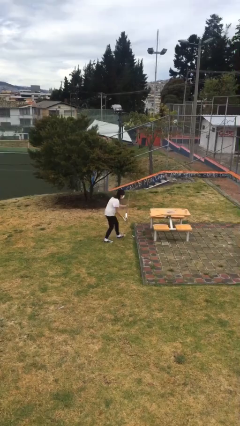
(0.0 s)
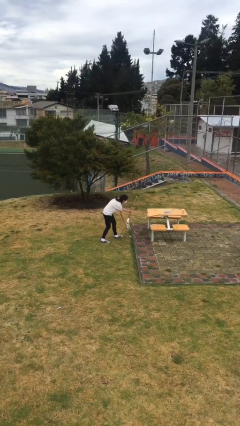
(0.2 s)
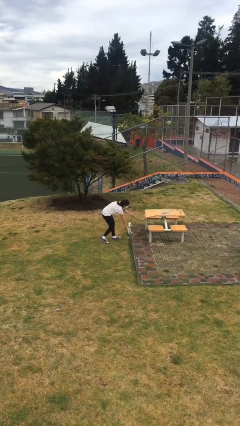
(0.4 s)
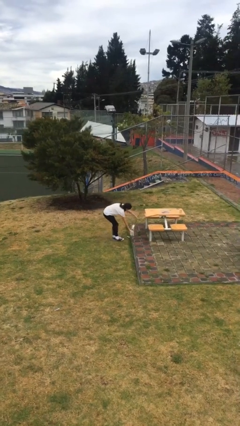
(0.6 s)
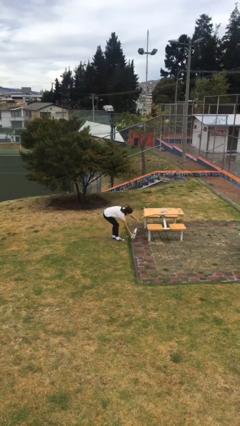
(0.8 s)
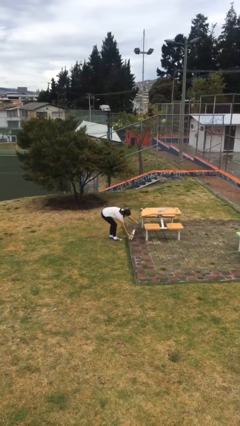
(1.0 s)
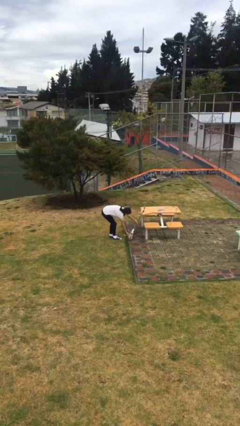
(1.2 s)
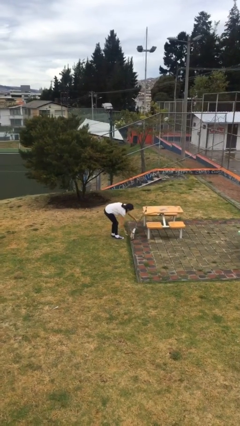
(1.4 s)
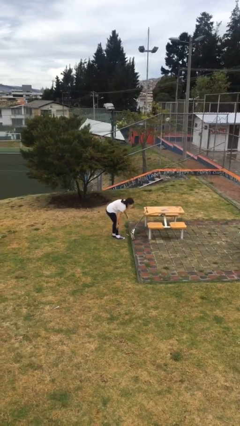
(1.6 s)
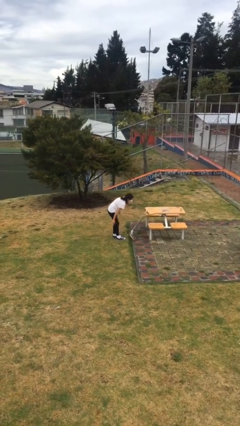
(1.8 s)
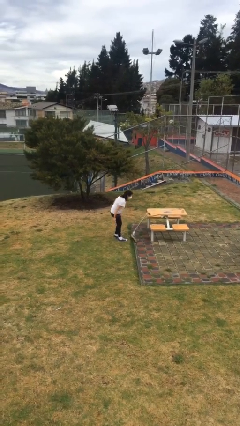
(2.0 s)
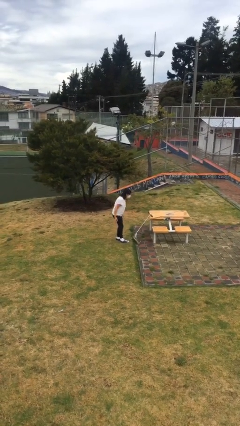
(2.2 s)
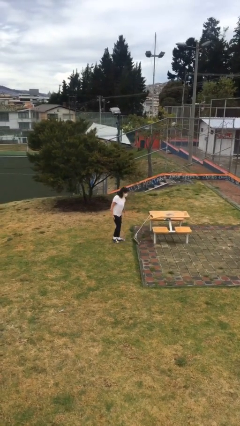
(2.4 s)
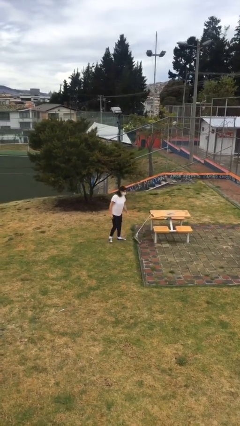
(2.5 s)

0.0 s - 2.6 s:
person puts down object on floor

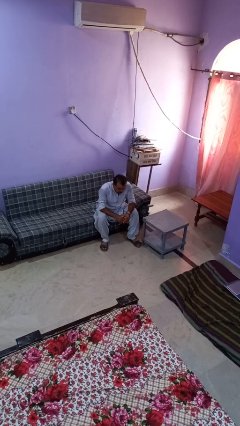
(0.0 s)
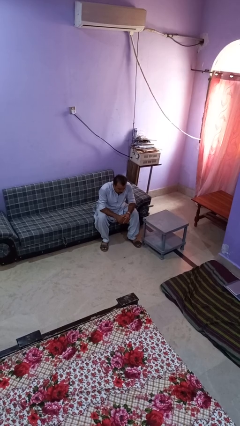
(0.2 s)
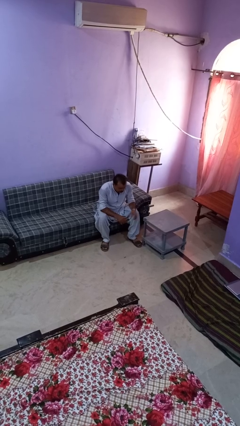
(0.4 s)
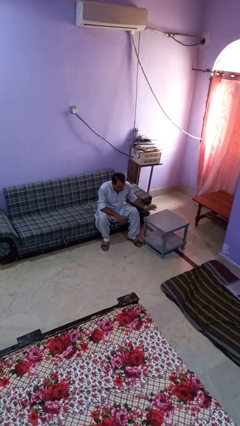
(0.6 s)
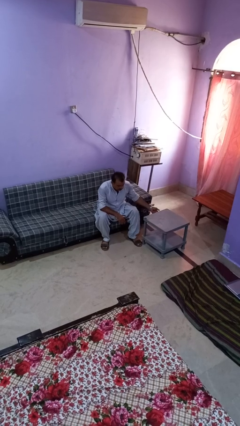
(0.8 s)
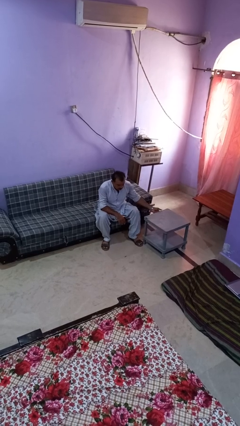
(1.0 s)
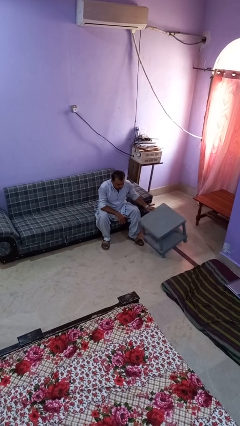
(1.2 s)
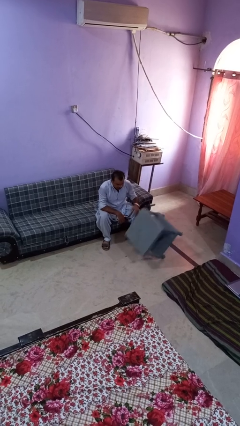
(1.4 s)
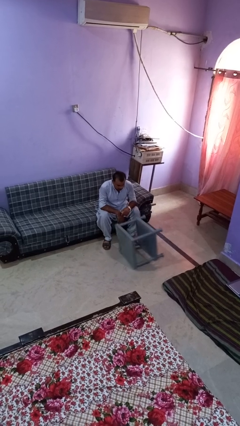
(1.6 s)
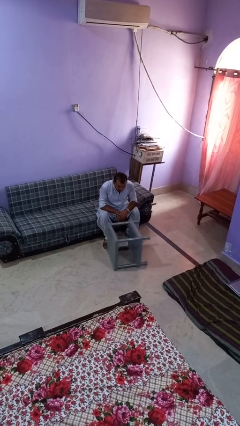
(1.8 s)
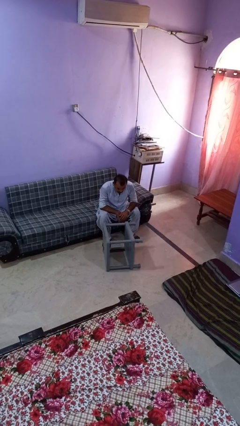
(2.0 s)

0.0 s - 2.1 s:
person knocks over furniture

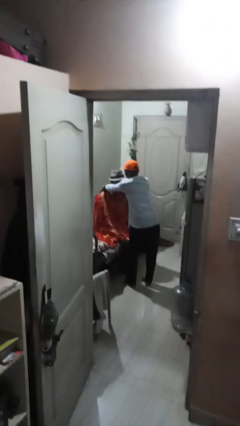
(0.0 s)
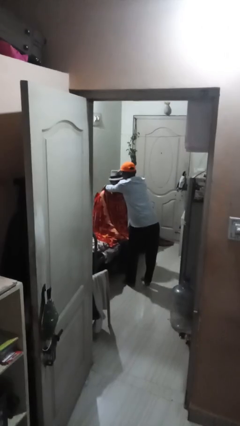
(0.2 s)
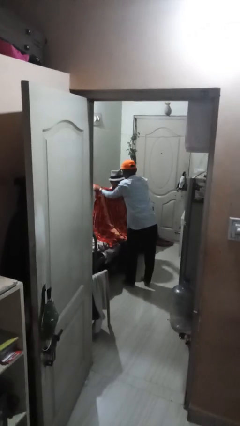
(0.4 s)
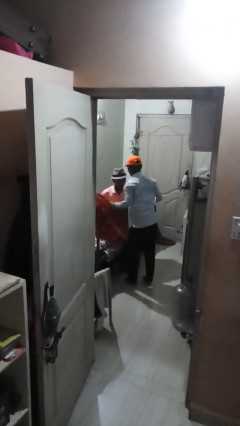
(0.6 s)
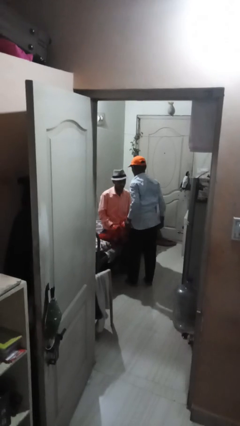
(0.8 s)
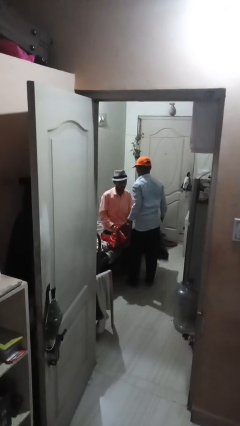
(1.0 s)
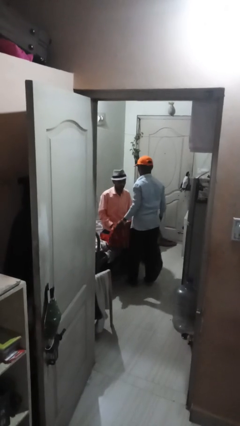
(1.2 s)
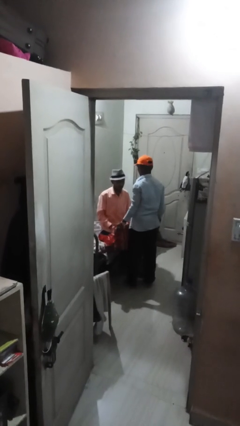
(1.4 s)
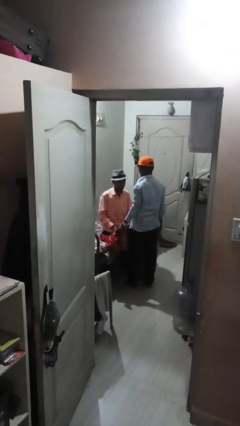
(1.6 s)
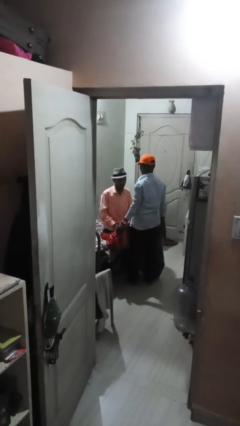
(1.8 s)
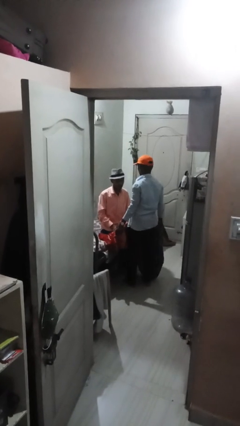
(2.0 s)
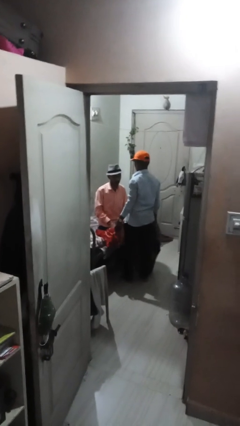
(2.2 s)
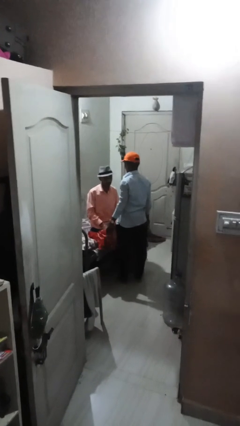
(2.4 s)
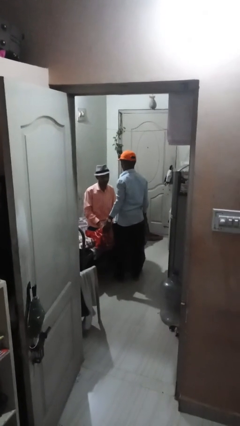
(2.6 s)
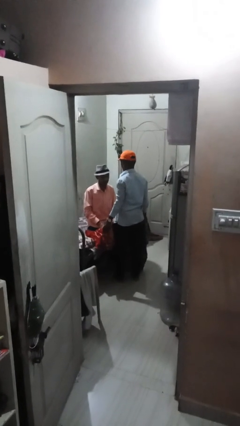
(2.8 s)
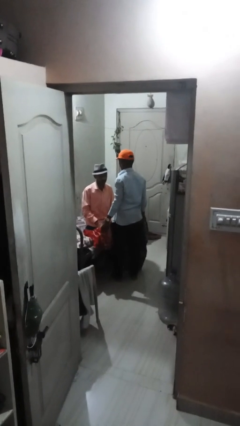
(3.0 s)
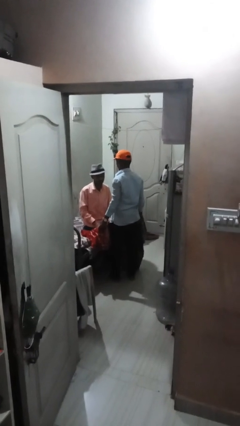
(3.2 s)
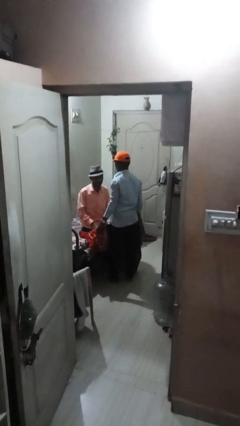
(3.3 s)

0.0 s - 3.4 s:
person uncovers friend with blanket

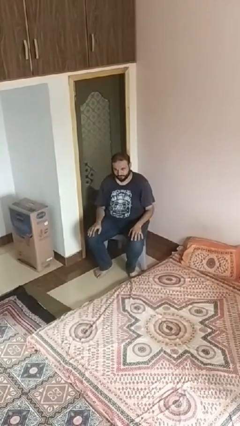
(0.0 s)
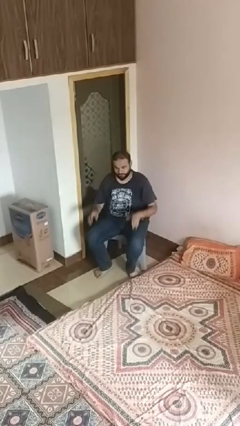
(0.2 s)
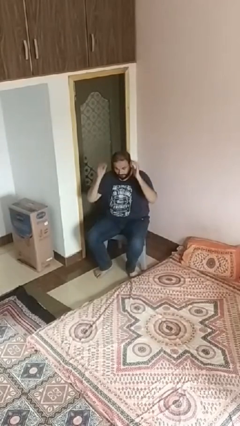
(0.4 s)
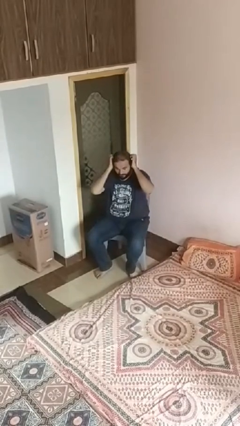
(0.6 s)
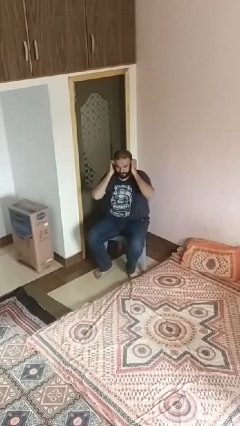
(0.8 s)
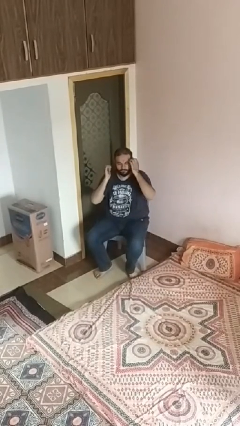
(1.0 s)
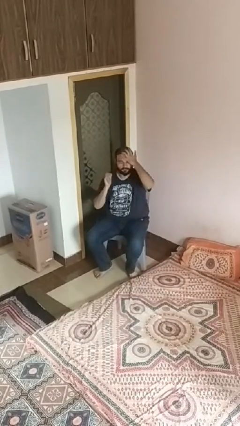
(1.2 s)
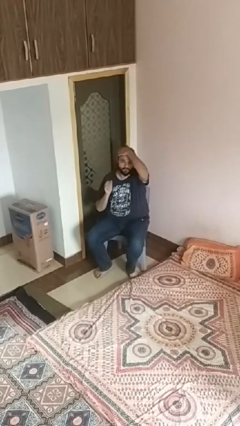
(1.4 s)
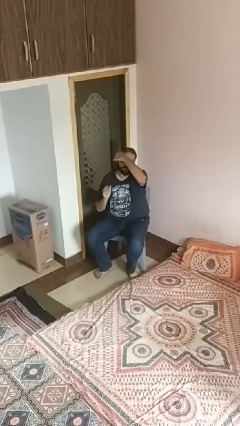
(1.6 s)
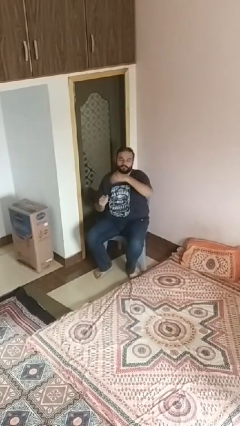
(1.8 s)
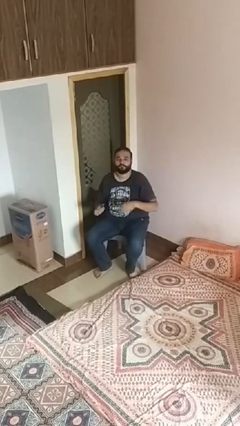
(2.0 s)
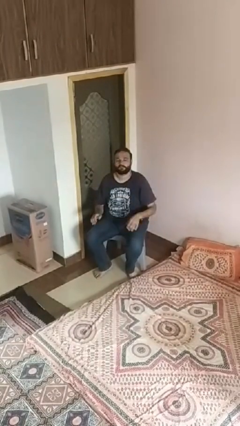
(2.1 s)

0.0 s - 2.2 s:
person strokes hair

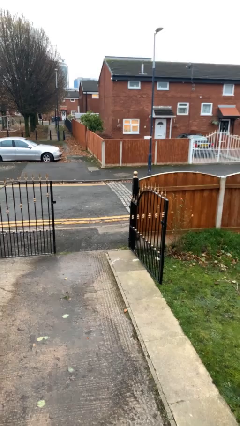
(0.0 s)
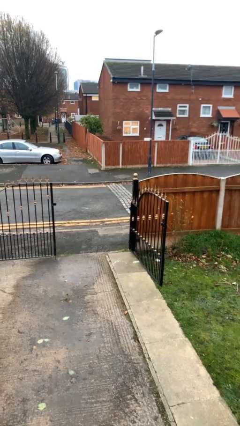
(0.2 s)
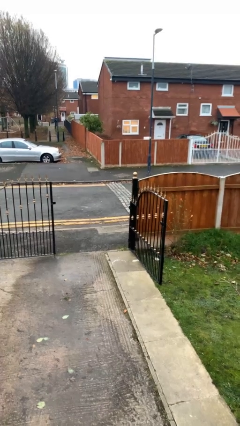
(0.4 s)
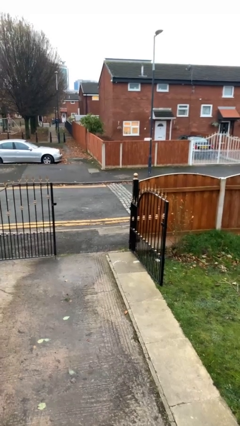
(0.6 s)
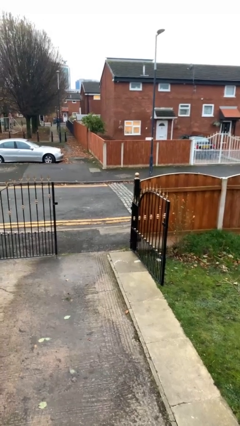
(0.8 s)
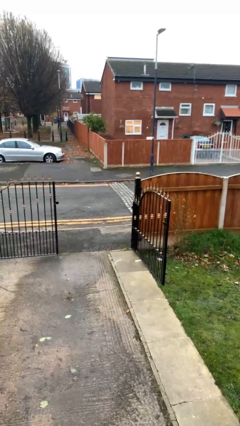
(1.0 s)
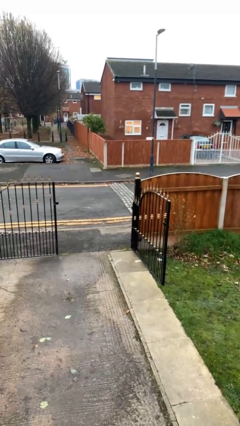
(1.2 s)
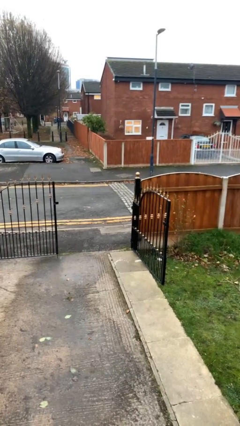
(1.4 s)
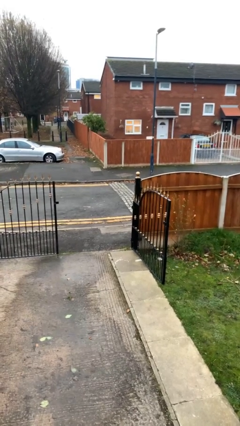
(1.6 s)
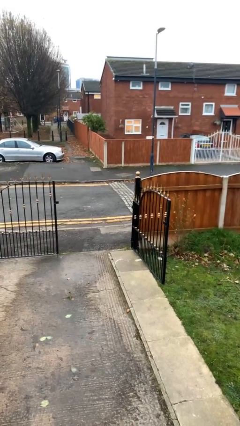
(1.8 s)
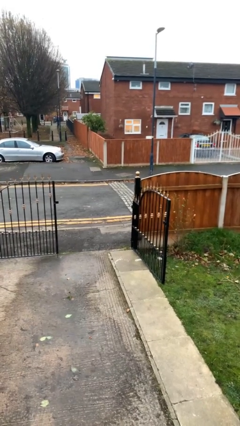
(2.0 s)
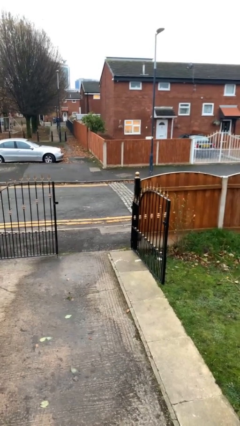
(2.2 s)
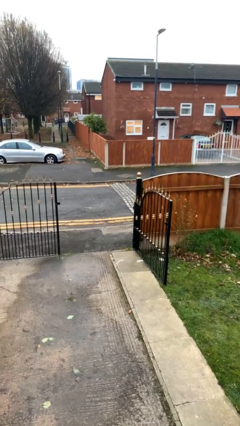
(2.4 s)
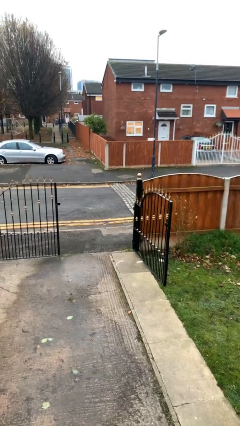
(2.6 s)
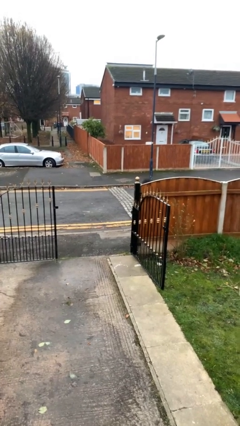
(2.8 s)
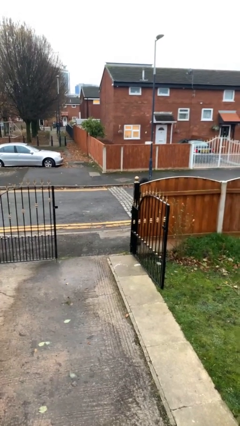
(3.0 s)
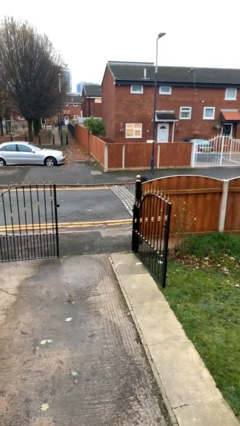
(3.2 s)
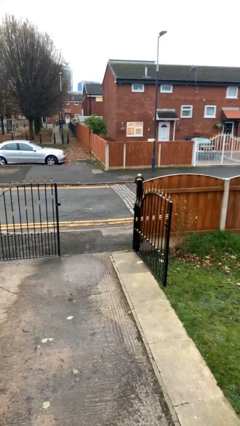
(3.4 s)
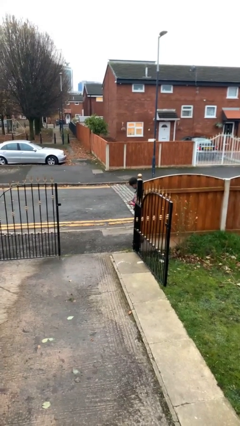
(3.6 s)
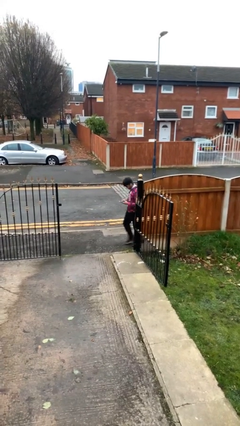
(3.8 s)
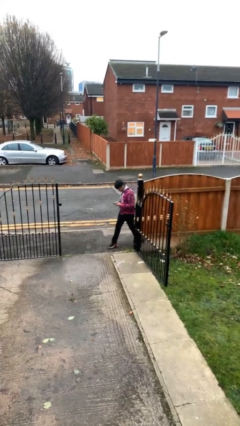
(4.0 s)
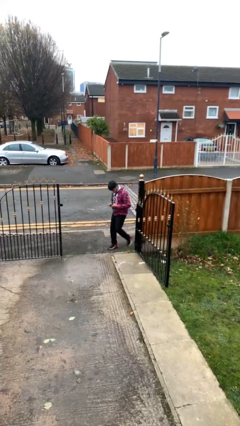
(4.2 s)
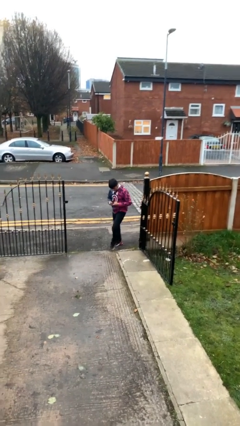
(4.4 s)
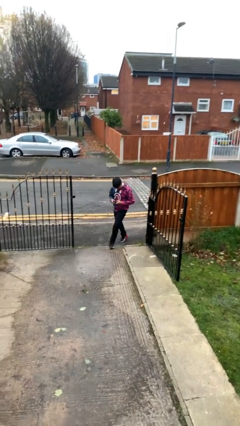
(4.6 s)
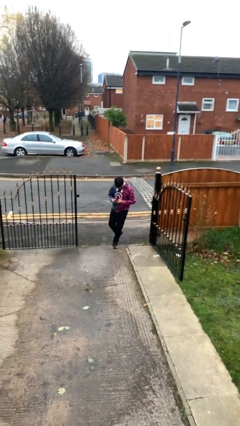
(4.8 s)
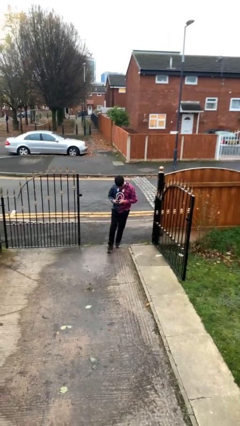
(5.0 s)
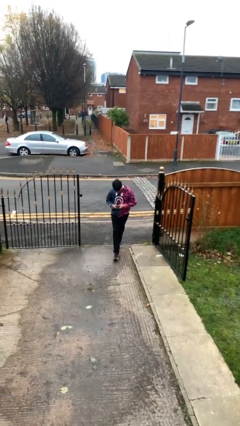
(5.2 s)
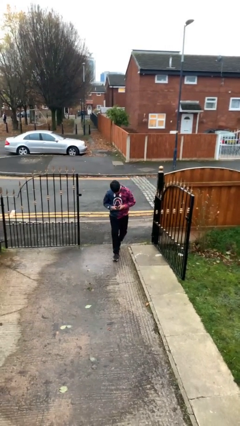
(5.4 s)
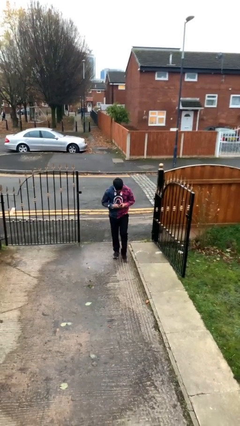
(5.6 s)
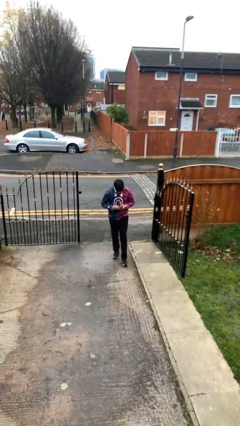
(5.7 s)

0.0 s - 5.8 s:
person enters scene through structure

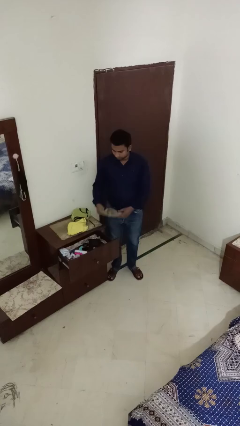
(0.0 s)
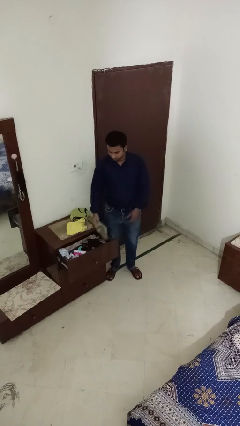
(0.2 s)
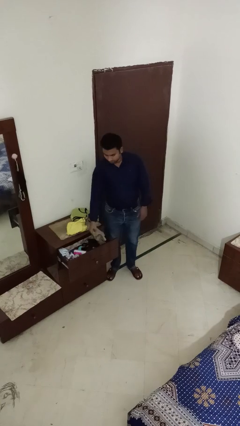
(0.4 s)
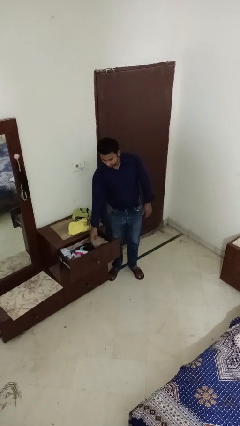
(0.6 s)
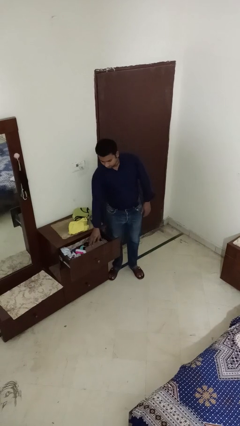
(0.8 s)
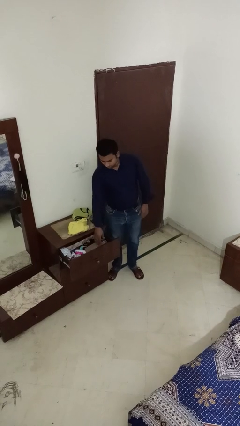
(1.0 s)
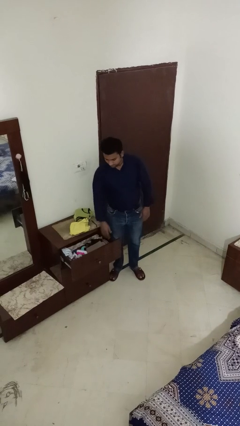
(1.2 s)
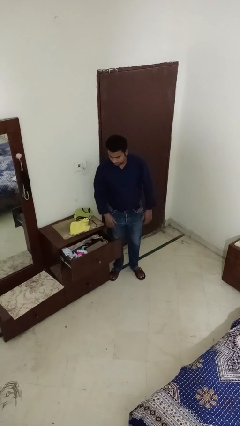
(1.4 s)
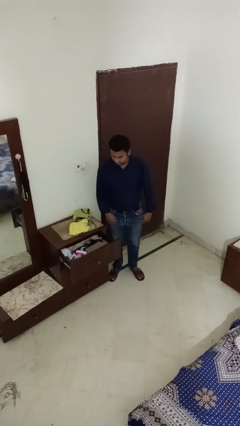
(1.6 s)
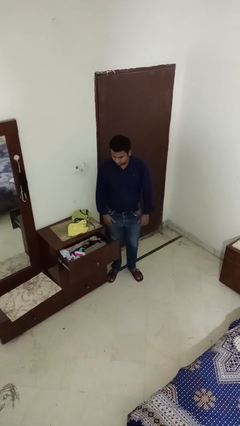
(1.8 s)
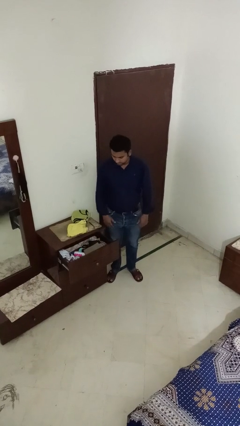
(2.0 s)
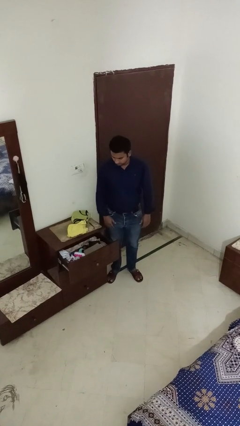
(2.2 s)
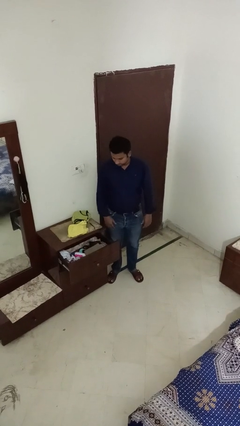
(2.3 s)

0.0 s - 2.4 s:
person puts clothes into dresser
